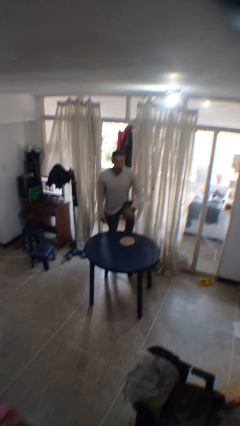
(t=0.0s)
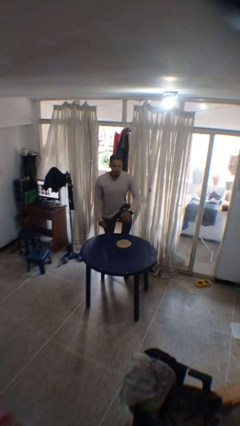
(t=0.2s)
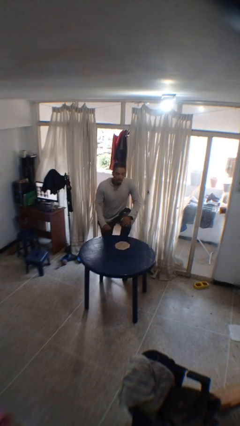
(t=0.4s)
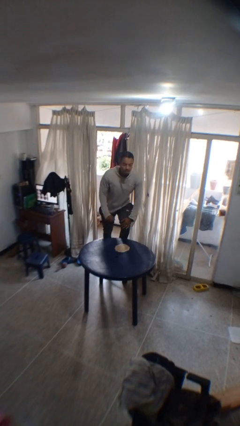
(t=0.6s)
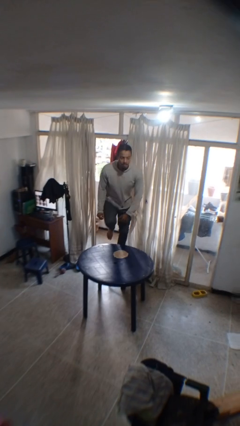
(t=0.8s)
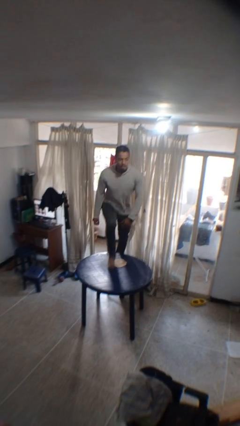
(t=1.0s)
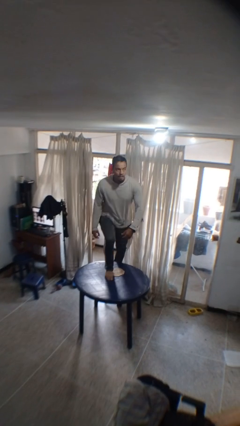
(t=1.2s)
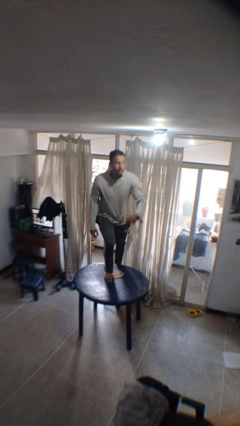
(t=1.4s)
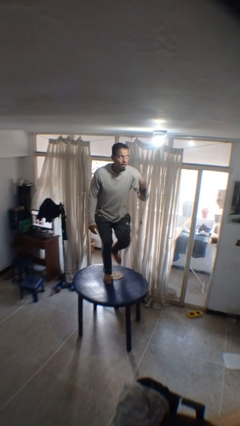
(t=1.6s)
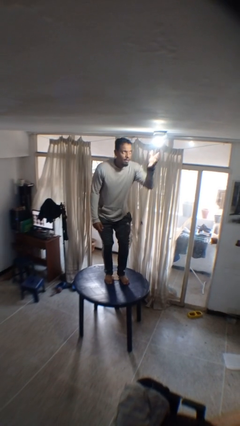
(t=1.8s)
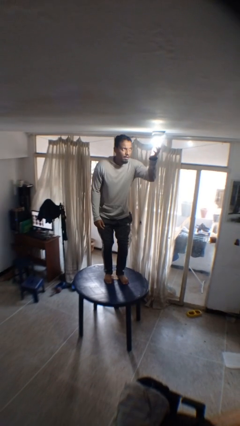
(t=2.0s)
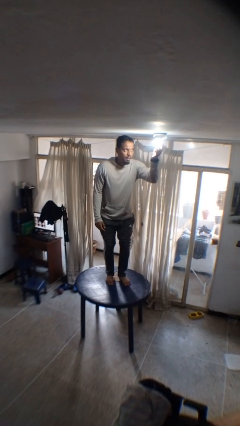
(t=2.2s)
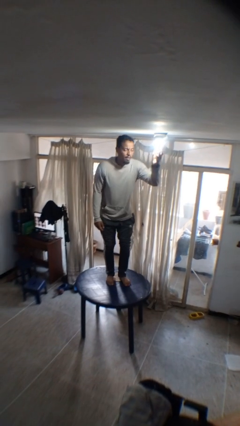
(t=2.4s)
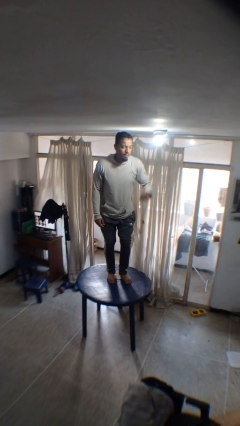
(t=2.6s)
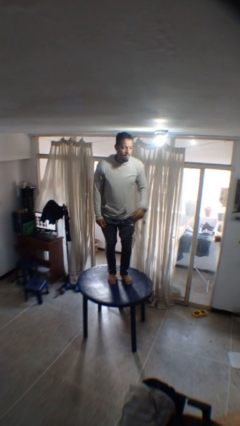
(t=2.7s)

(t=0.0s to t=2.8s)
person climbs on table

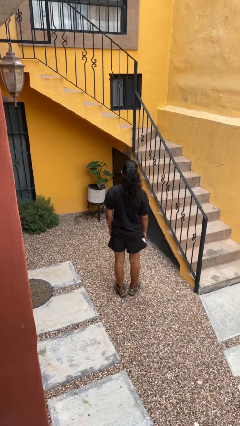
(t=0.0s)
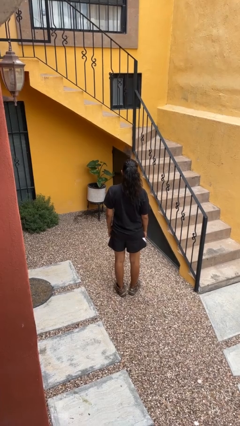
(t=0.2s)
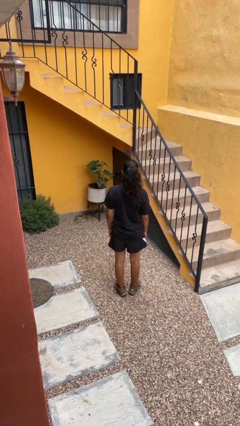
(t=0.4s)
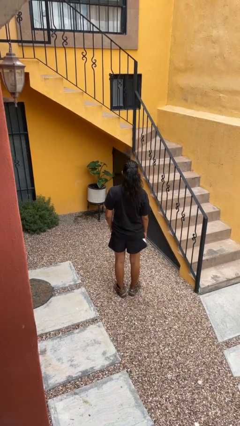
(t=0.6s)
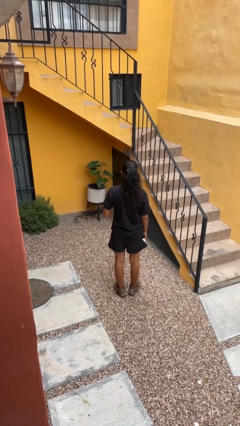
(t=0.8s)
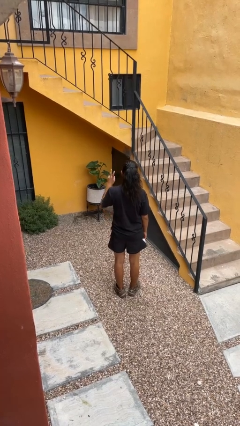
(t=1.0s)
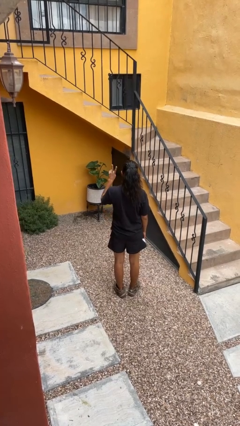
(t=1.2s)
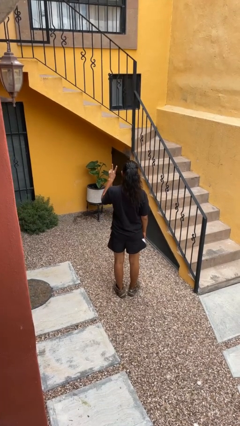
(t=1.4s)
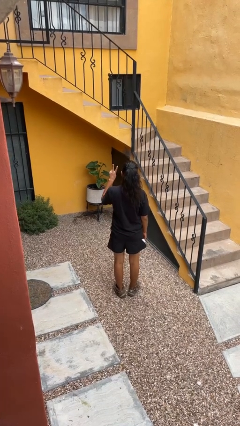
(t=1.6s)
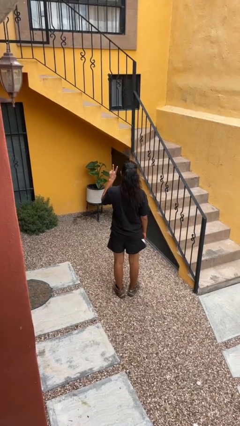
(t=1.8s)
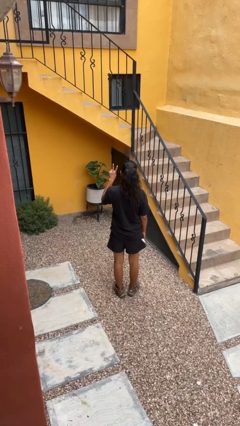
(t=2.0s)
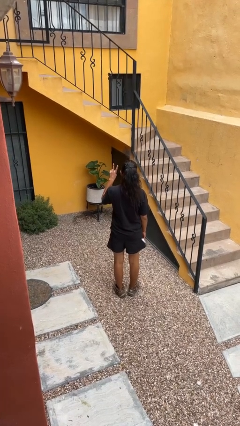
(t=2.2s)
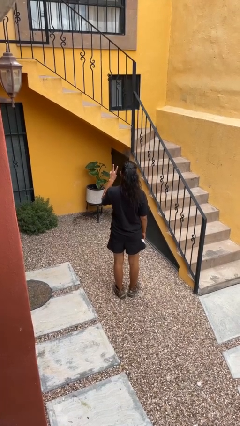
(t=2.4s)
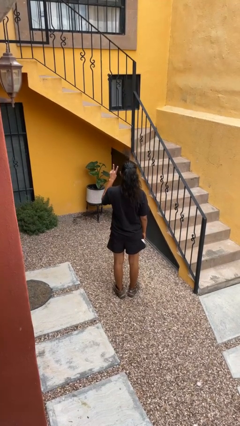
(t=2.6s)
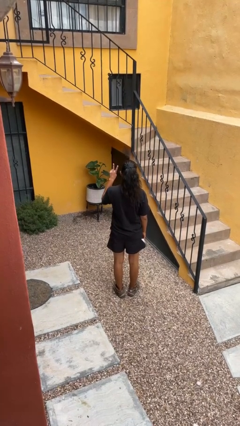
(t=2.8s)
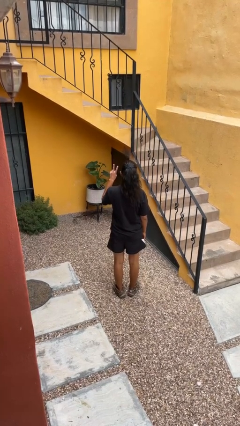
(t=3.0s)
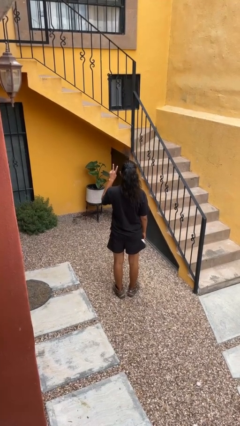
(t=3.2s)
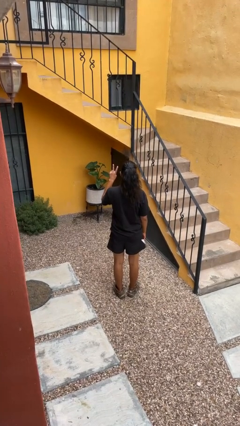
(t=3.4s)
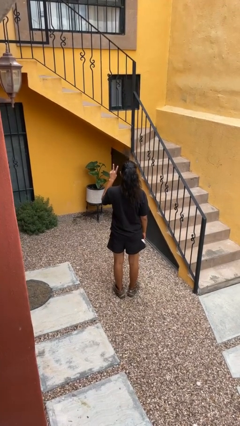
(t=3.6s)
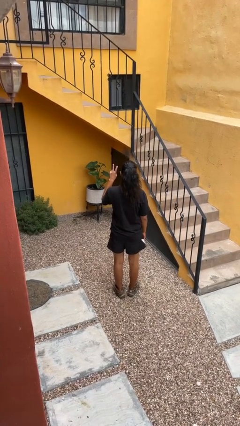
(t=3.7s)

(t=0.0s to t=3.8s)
person gestures peace

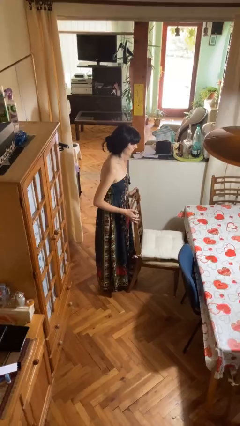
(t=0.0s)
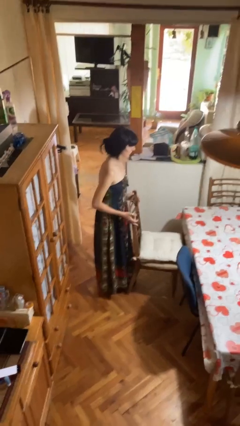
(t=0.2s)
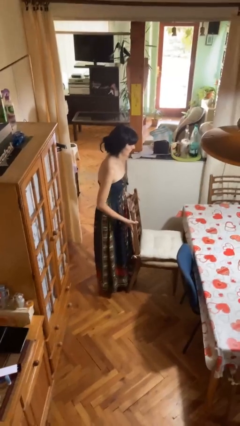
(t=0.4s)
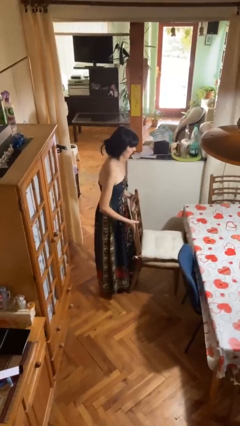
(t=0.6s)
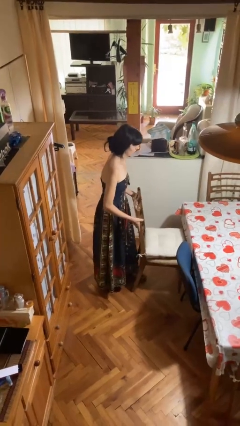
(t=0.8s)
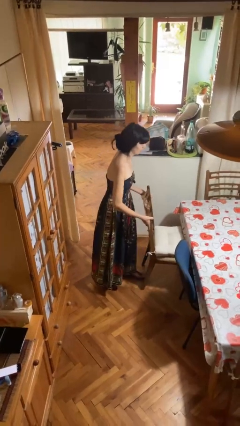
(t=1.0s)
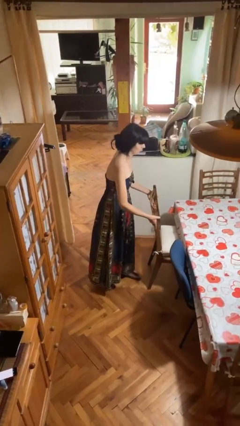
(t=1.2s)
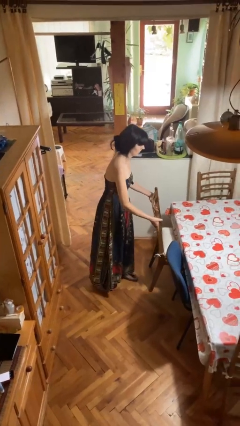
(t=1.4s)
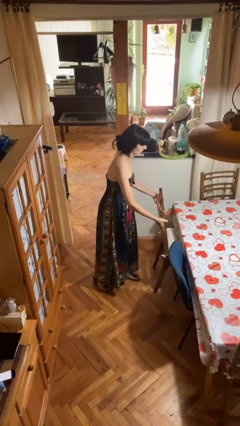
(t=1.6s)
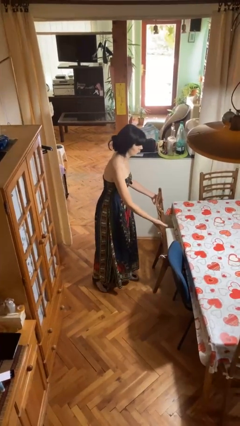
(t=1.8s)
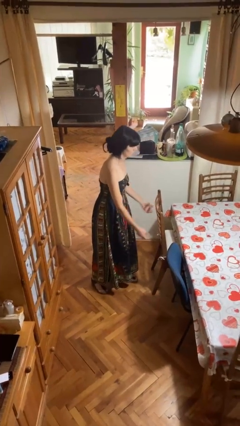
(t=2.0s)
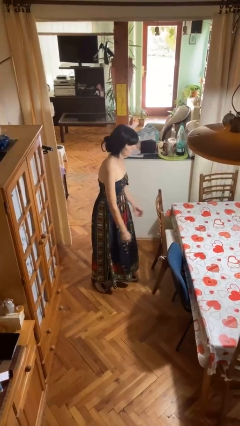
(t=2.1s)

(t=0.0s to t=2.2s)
person pushes in chair

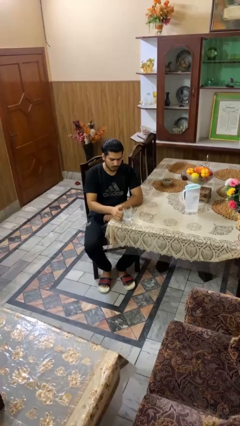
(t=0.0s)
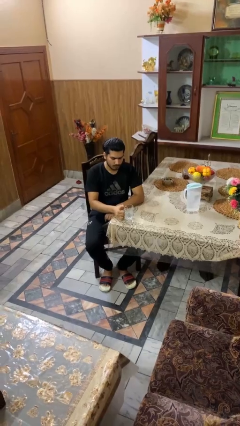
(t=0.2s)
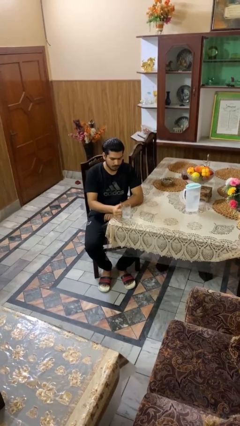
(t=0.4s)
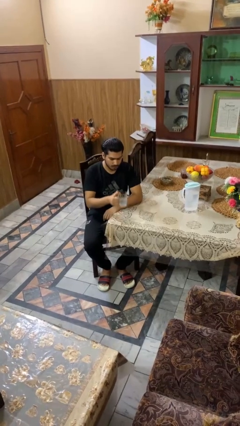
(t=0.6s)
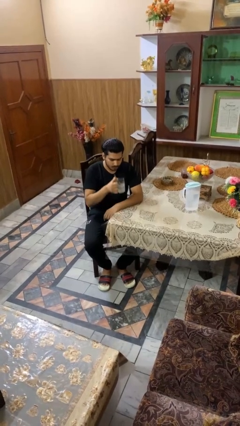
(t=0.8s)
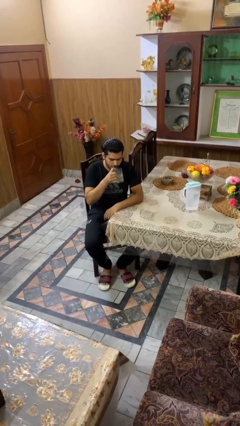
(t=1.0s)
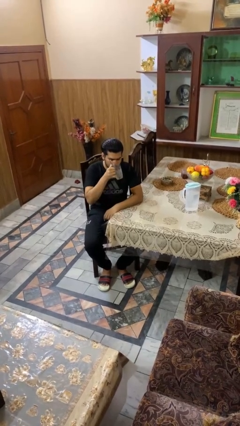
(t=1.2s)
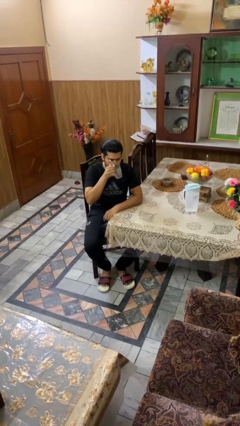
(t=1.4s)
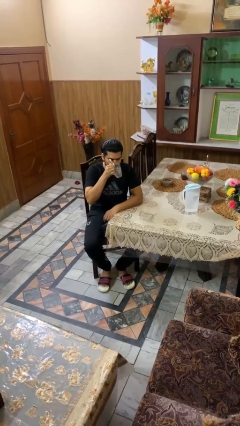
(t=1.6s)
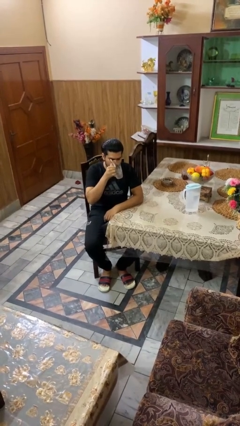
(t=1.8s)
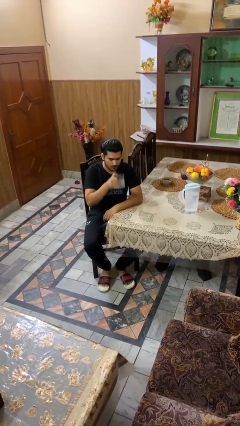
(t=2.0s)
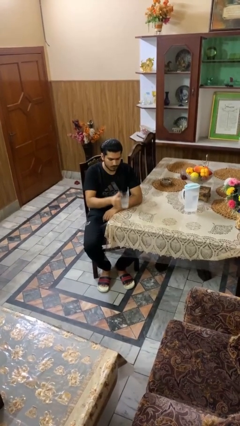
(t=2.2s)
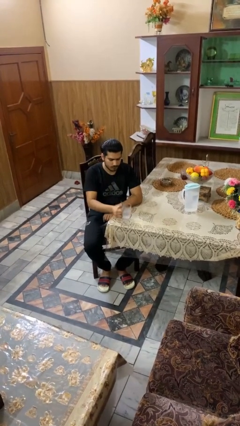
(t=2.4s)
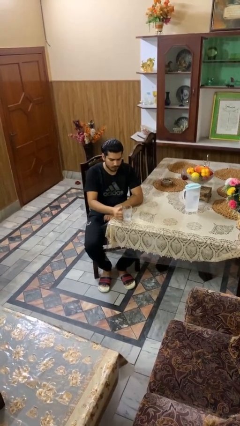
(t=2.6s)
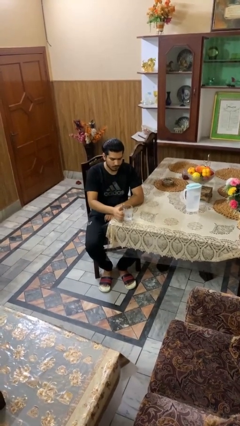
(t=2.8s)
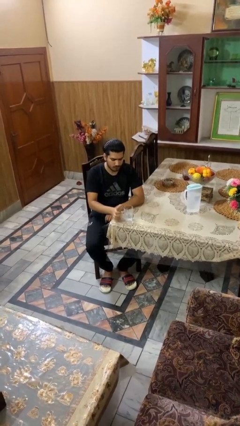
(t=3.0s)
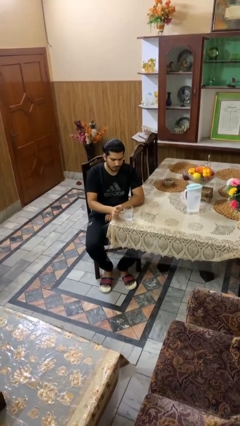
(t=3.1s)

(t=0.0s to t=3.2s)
person drinks from mug

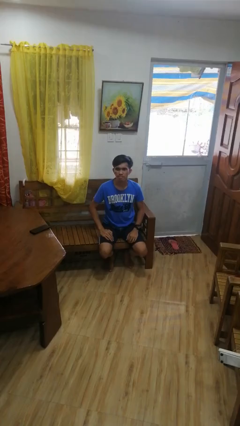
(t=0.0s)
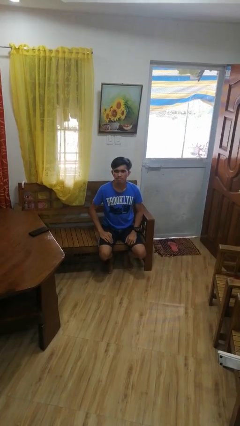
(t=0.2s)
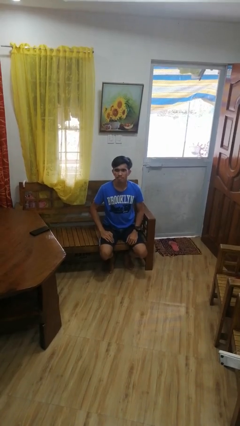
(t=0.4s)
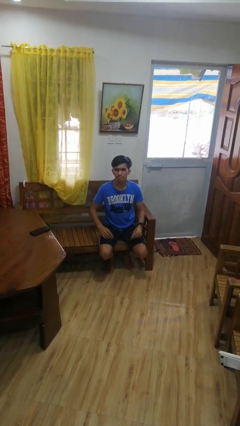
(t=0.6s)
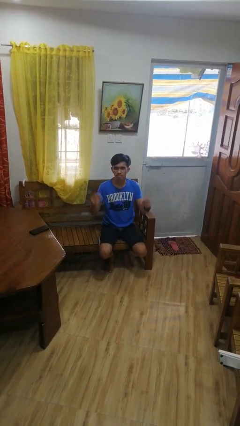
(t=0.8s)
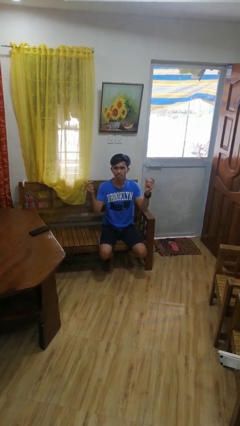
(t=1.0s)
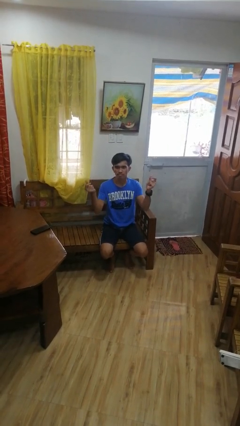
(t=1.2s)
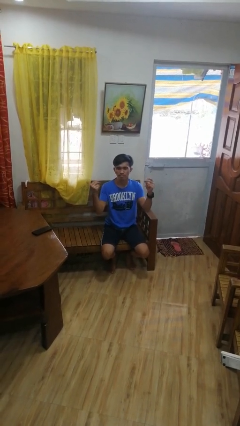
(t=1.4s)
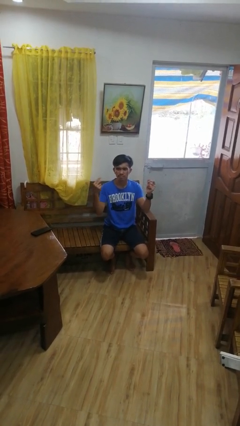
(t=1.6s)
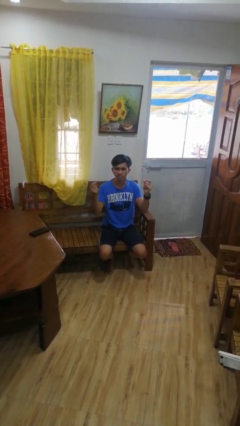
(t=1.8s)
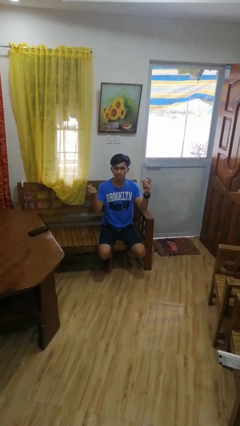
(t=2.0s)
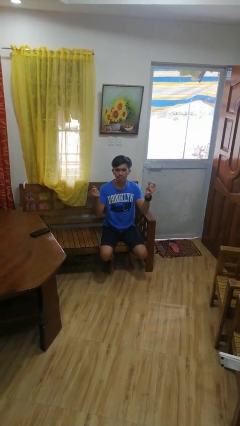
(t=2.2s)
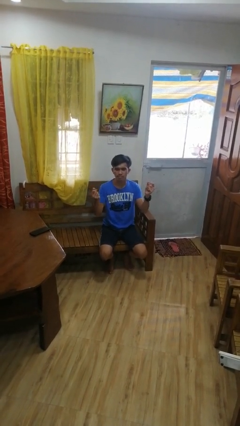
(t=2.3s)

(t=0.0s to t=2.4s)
person snaps fingers

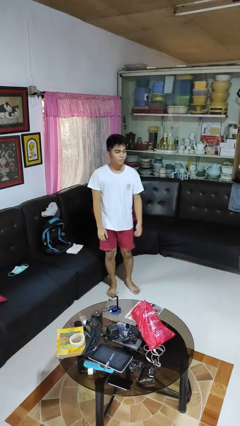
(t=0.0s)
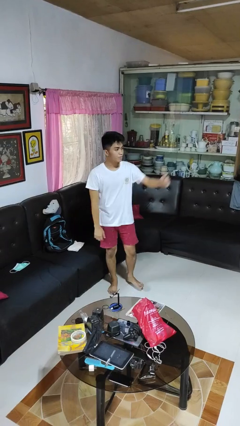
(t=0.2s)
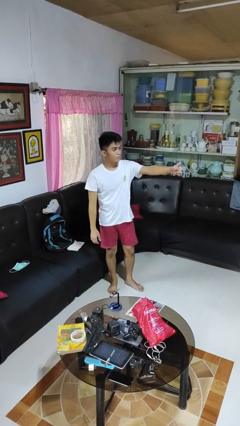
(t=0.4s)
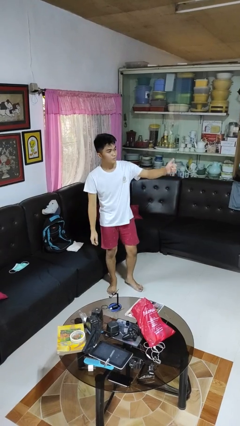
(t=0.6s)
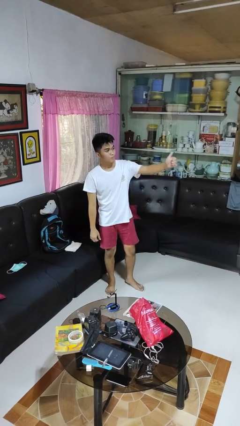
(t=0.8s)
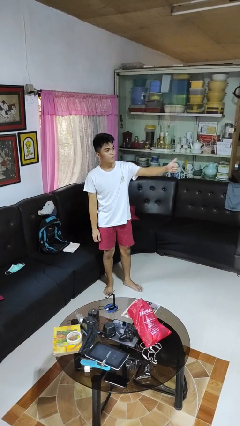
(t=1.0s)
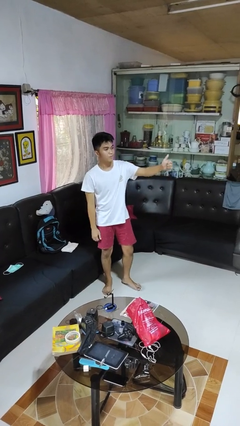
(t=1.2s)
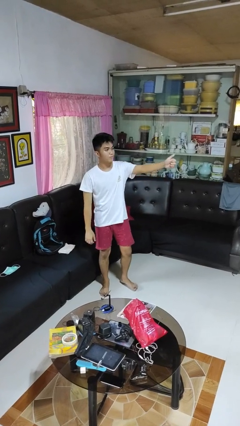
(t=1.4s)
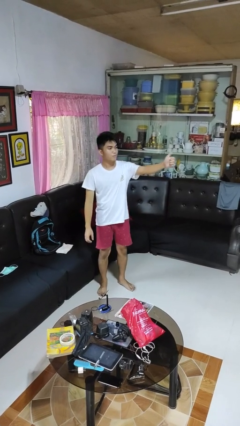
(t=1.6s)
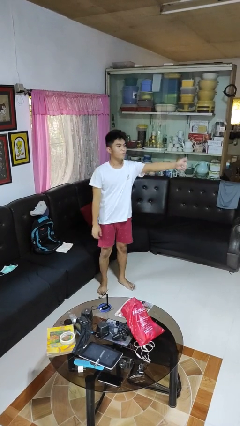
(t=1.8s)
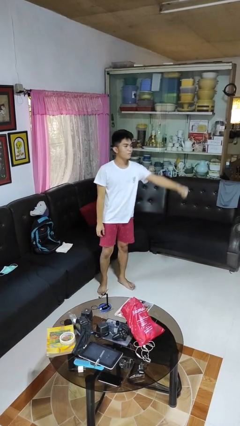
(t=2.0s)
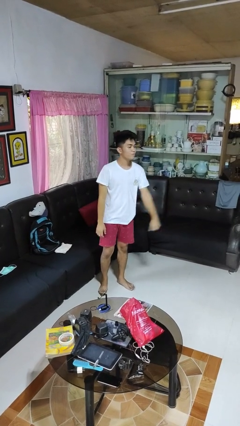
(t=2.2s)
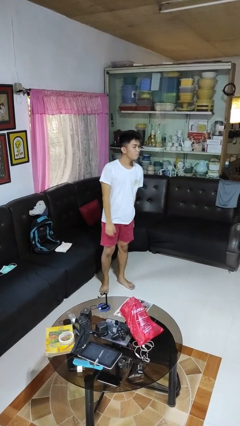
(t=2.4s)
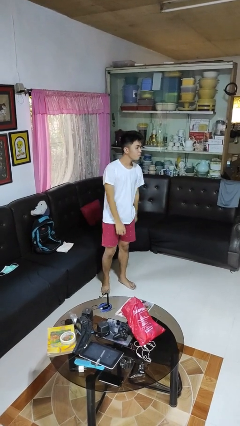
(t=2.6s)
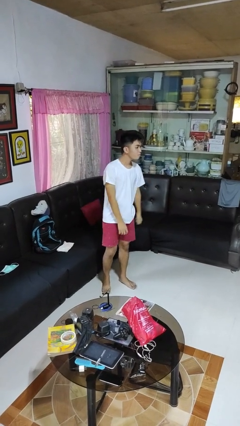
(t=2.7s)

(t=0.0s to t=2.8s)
person gestures thumbs up

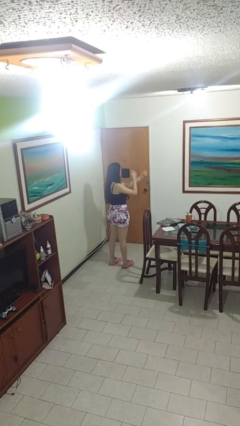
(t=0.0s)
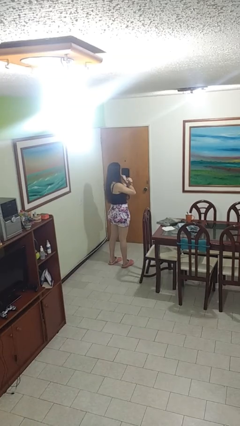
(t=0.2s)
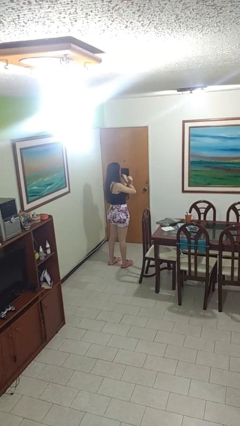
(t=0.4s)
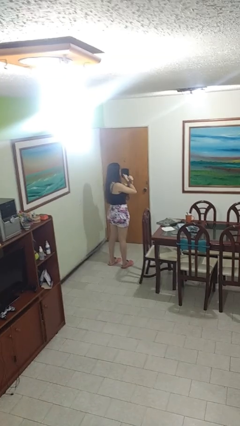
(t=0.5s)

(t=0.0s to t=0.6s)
person gestures arms x
